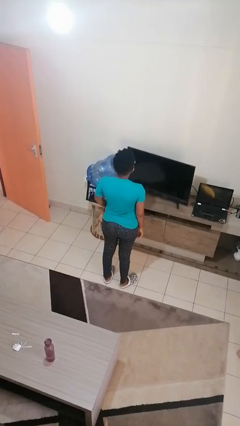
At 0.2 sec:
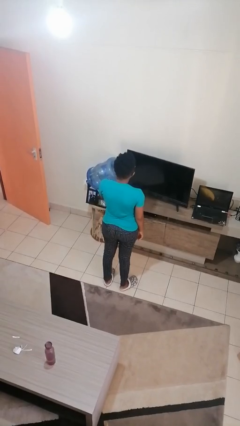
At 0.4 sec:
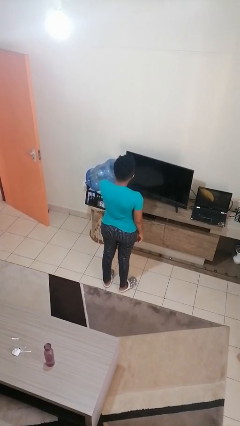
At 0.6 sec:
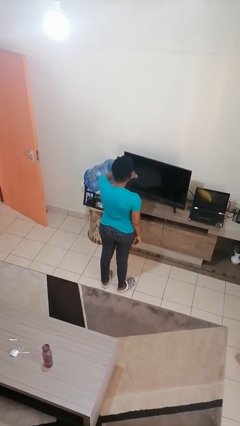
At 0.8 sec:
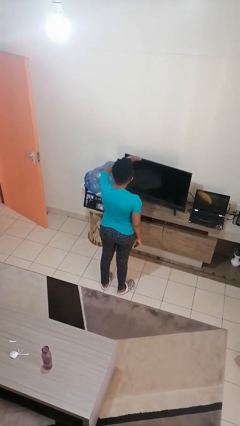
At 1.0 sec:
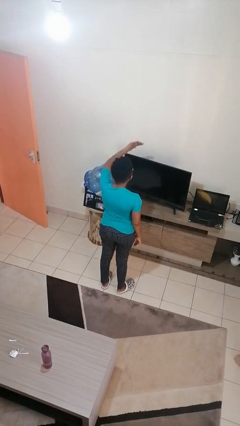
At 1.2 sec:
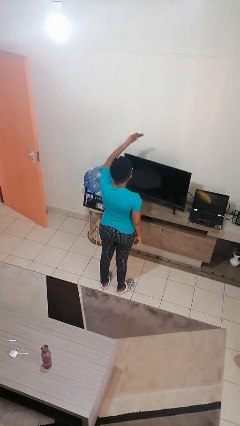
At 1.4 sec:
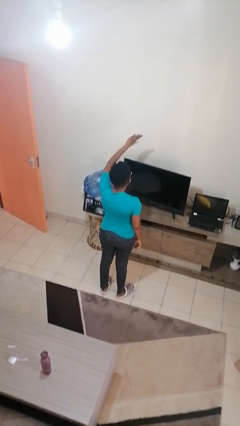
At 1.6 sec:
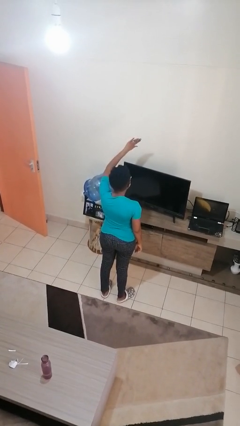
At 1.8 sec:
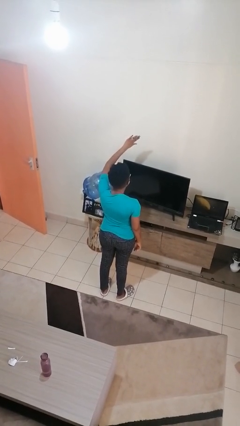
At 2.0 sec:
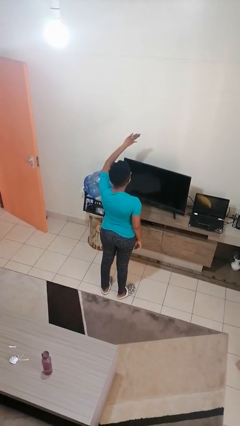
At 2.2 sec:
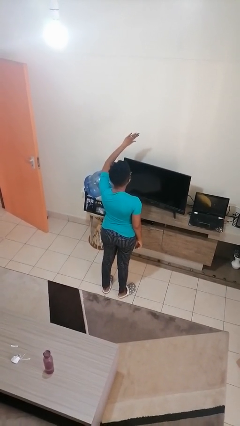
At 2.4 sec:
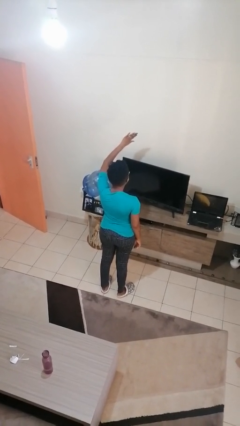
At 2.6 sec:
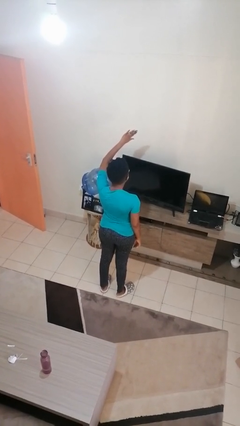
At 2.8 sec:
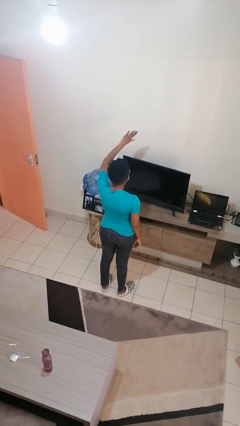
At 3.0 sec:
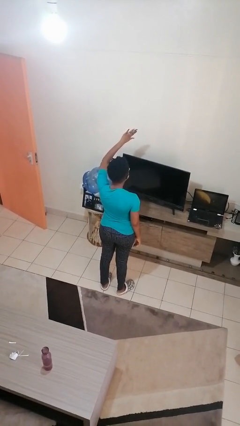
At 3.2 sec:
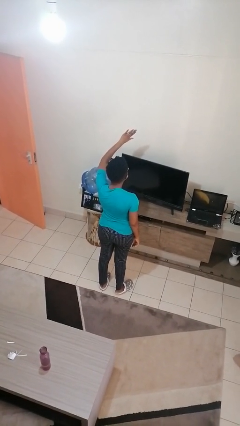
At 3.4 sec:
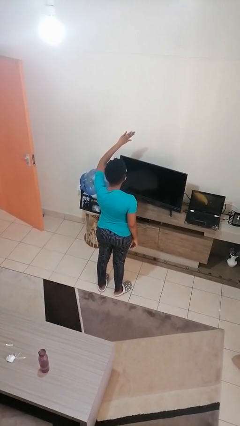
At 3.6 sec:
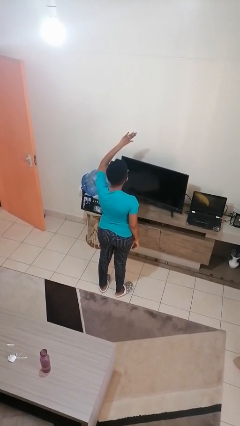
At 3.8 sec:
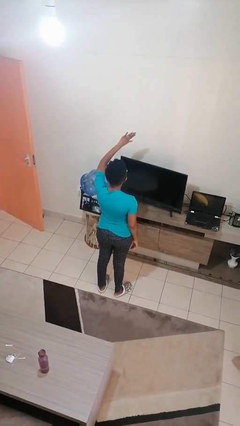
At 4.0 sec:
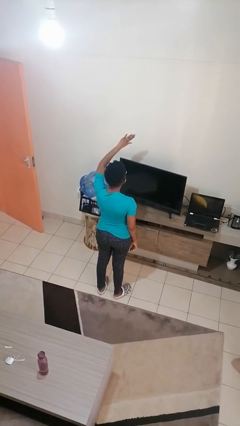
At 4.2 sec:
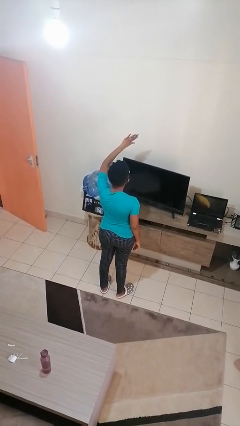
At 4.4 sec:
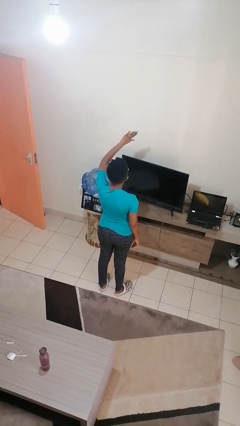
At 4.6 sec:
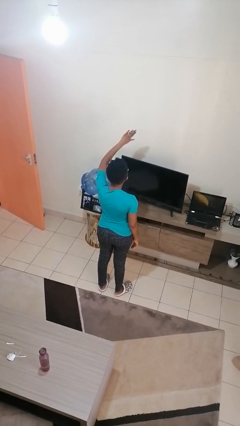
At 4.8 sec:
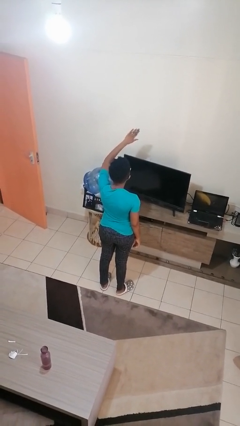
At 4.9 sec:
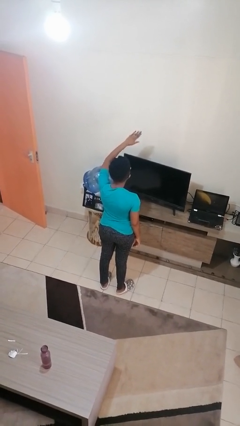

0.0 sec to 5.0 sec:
person gestures swipe up

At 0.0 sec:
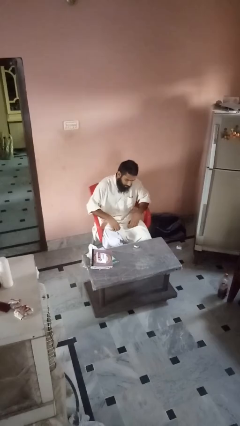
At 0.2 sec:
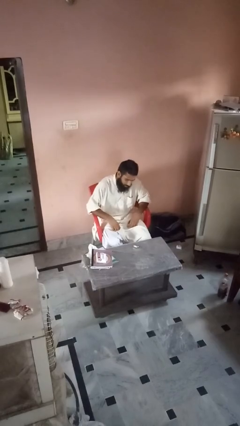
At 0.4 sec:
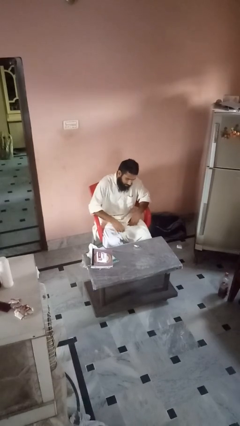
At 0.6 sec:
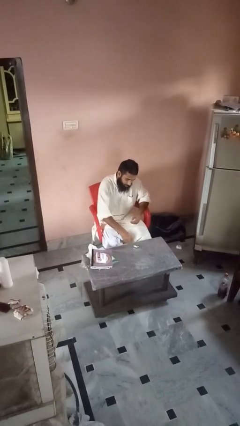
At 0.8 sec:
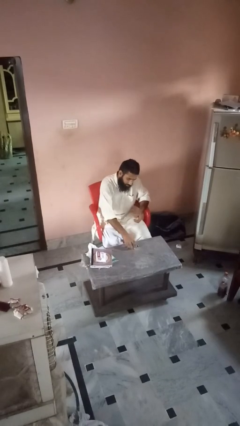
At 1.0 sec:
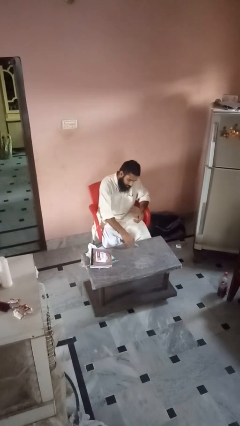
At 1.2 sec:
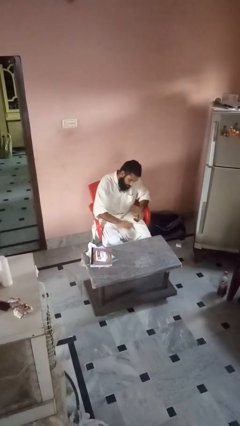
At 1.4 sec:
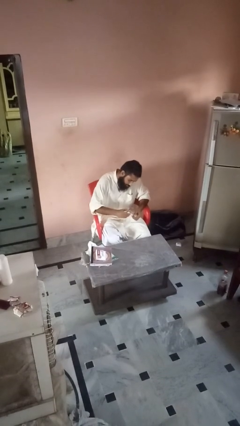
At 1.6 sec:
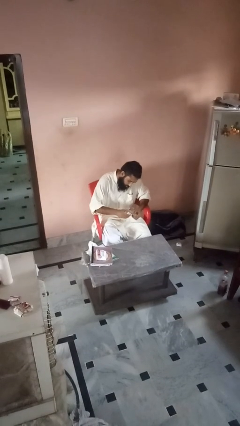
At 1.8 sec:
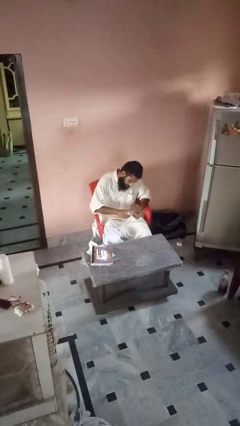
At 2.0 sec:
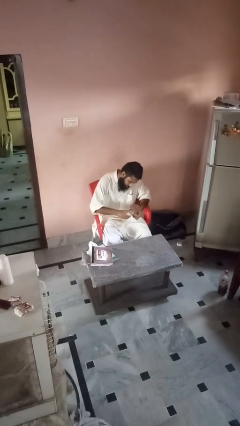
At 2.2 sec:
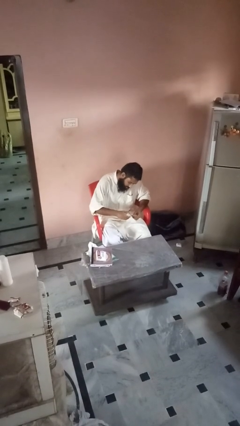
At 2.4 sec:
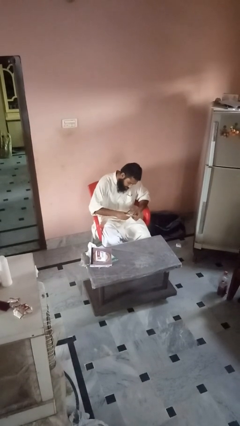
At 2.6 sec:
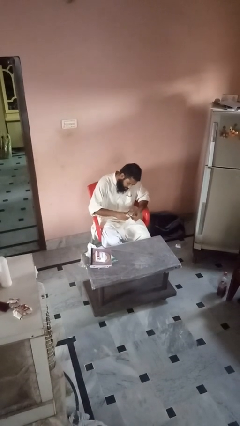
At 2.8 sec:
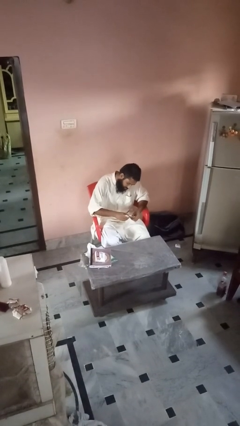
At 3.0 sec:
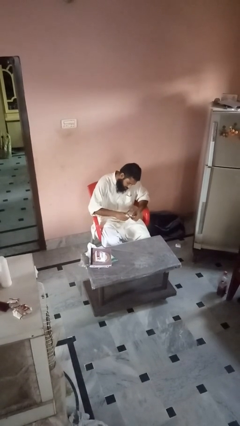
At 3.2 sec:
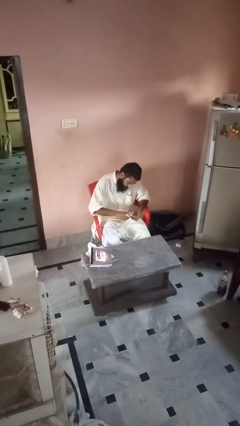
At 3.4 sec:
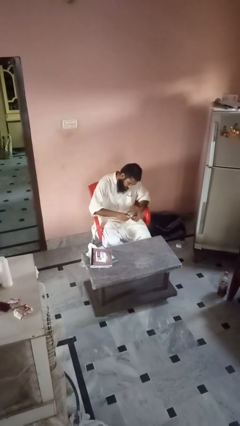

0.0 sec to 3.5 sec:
person clips fingernails

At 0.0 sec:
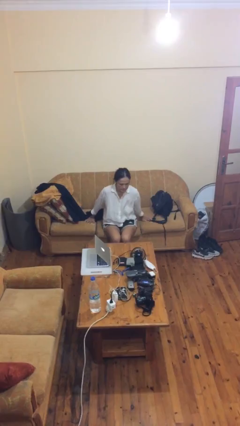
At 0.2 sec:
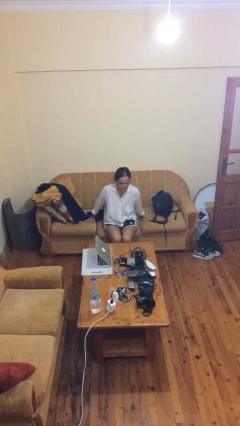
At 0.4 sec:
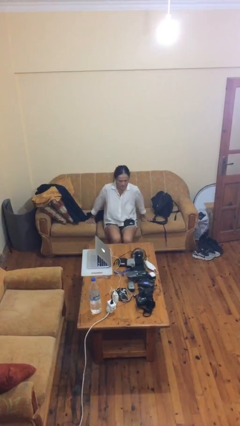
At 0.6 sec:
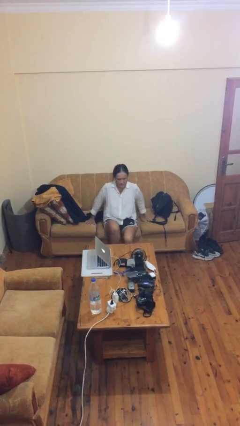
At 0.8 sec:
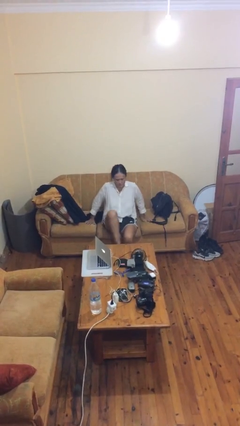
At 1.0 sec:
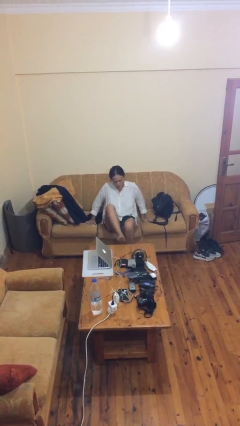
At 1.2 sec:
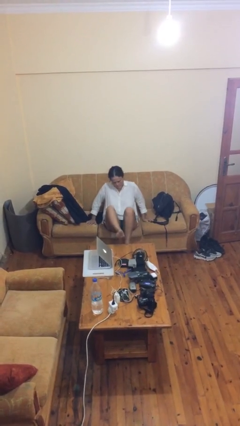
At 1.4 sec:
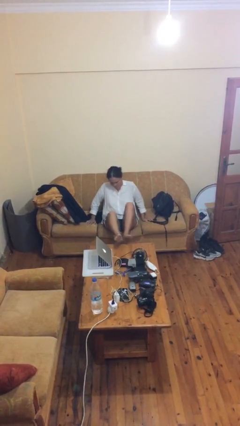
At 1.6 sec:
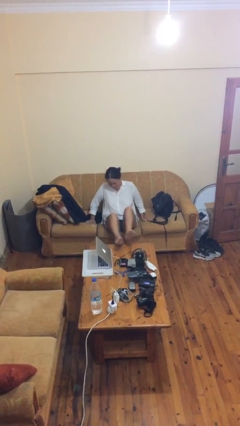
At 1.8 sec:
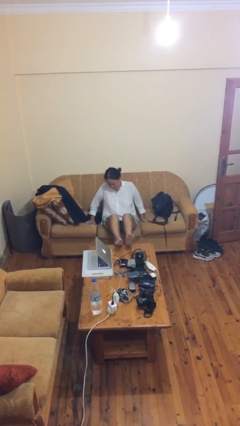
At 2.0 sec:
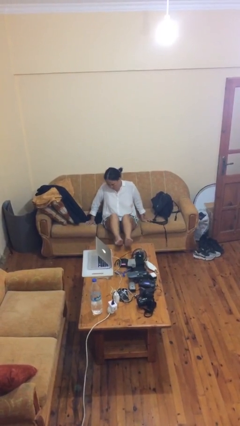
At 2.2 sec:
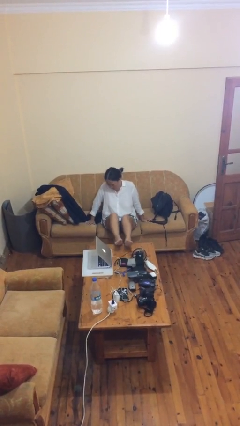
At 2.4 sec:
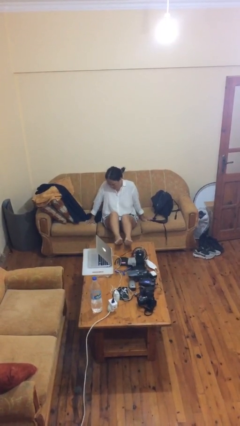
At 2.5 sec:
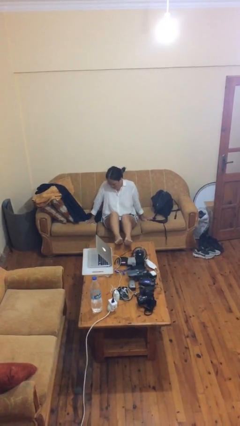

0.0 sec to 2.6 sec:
person puts feet up

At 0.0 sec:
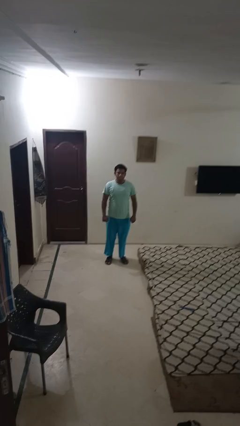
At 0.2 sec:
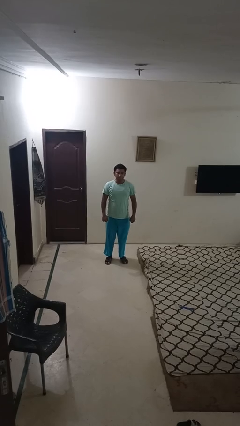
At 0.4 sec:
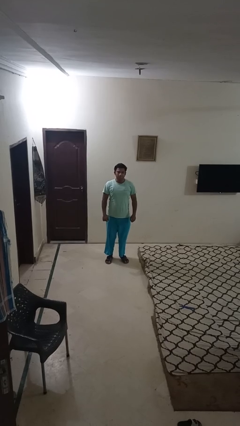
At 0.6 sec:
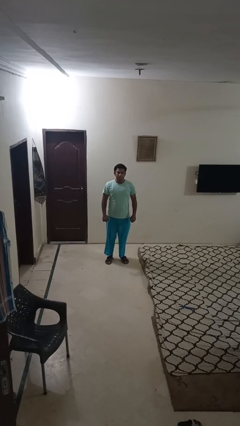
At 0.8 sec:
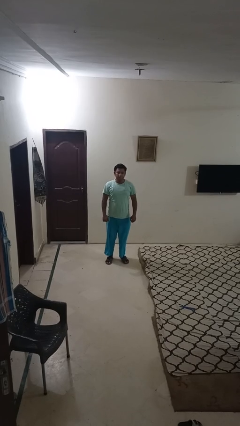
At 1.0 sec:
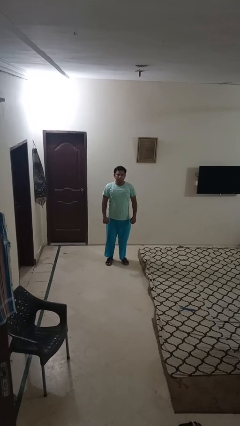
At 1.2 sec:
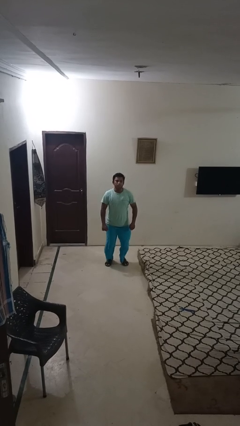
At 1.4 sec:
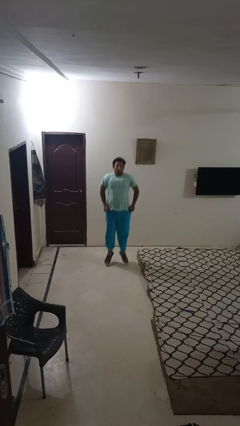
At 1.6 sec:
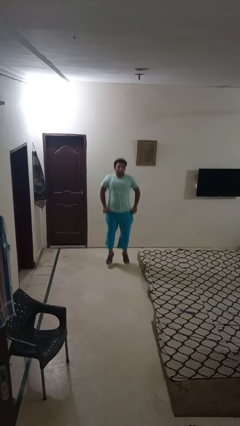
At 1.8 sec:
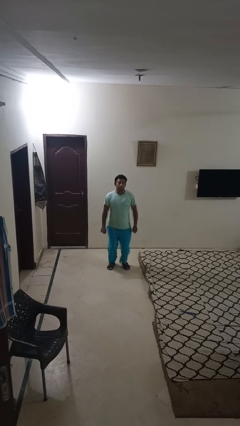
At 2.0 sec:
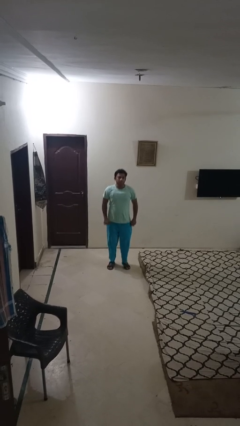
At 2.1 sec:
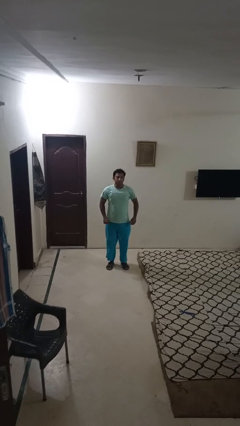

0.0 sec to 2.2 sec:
person jumps

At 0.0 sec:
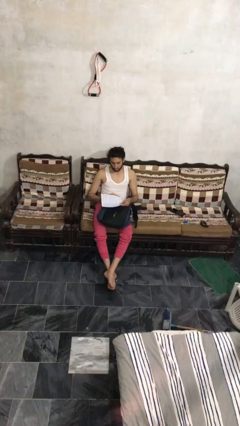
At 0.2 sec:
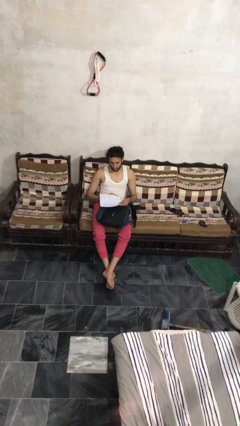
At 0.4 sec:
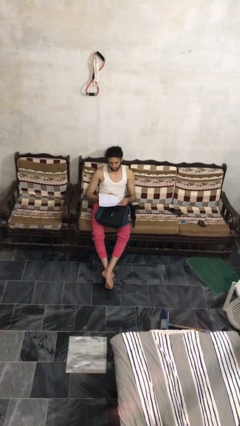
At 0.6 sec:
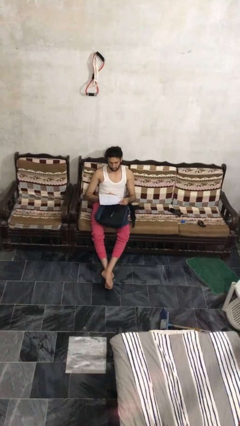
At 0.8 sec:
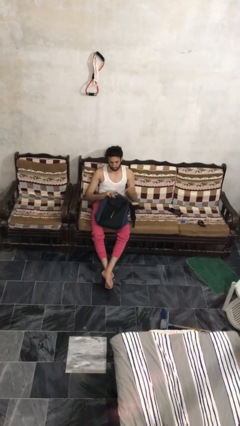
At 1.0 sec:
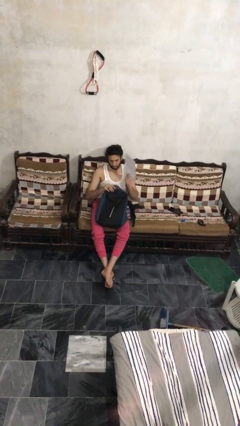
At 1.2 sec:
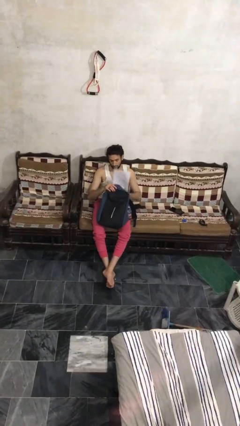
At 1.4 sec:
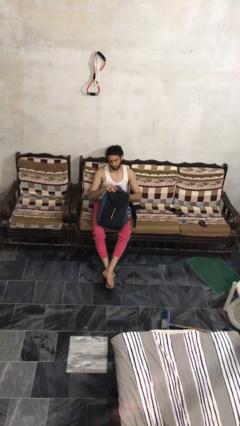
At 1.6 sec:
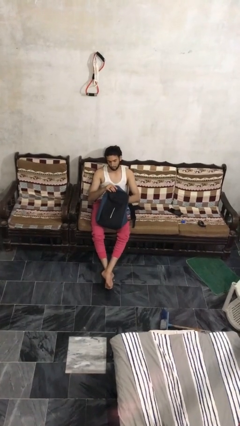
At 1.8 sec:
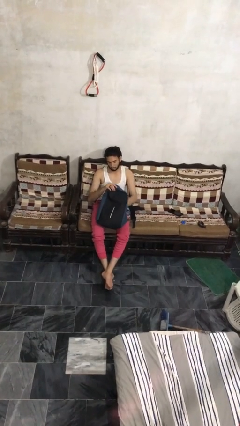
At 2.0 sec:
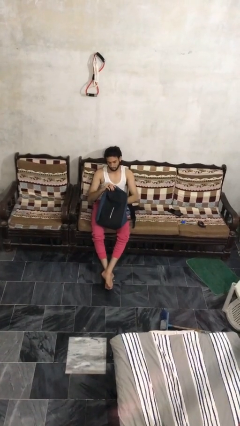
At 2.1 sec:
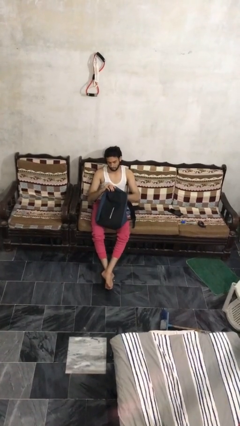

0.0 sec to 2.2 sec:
person puts object into backpack

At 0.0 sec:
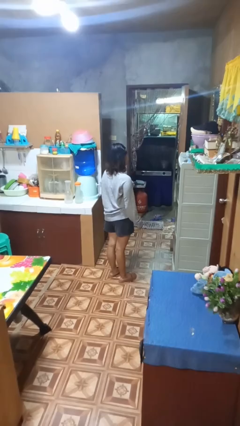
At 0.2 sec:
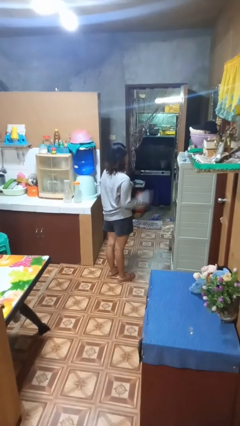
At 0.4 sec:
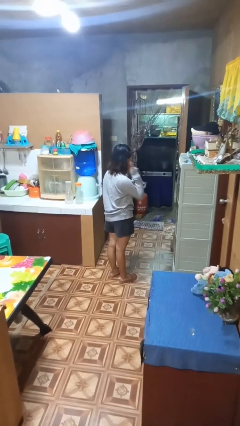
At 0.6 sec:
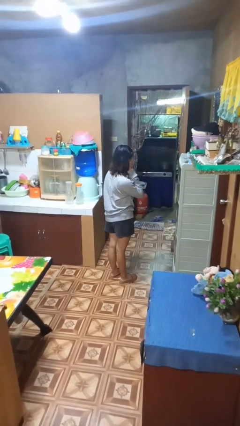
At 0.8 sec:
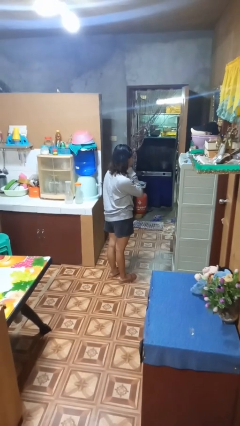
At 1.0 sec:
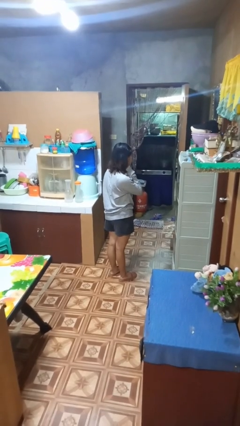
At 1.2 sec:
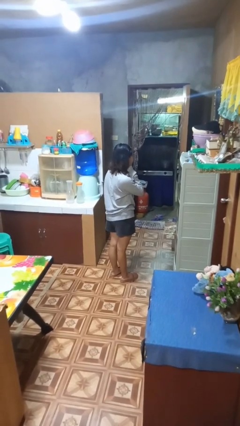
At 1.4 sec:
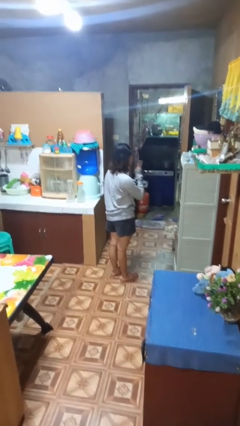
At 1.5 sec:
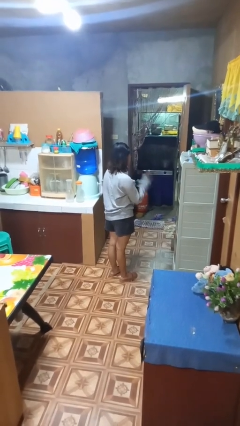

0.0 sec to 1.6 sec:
person gestures listen closely

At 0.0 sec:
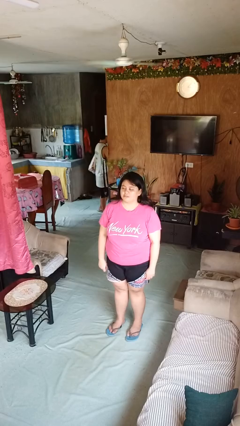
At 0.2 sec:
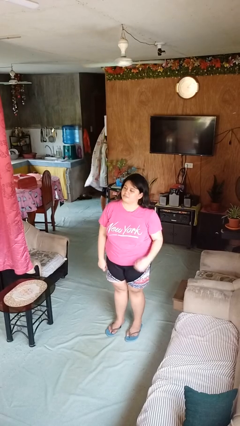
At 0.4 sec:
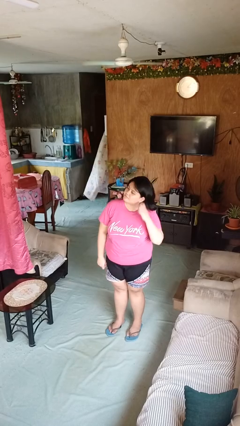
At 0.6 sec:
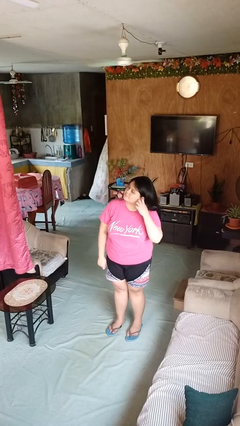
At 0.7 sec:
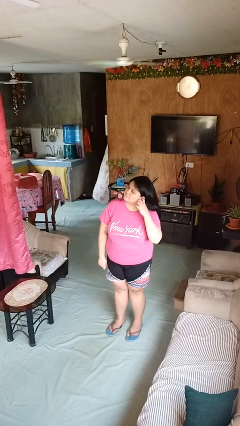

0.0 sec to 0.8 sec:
person touches earlobe
